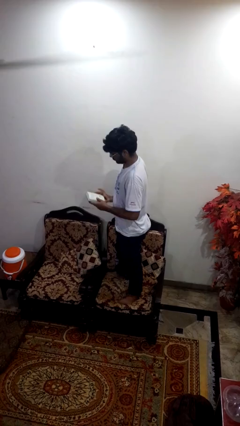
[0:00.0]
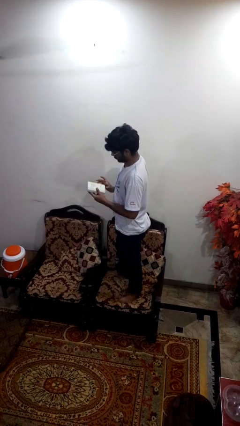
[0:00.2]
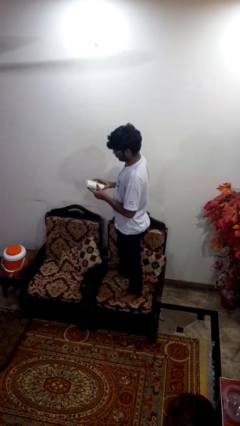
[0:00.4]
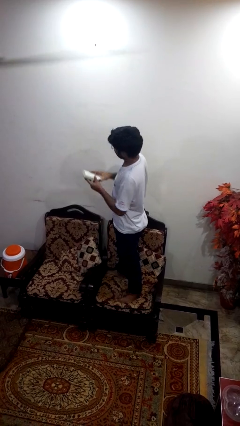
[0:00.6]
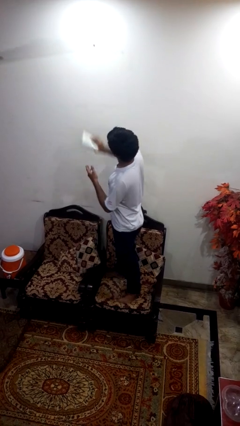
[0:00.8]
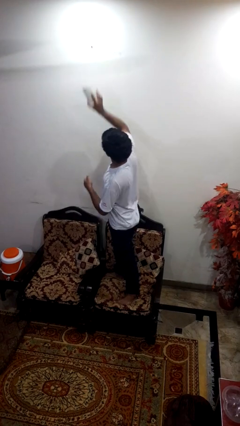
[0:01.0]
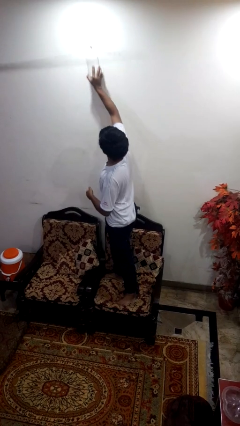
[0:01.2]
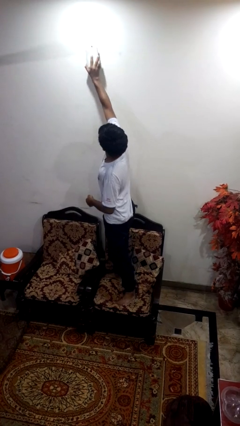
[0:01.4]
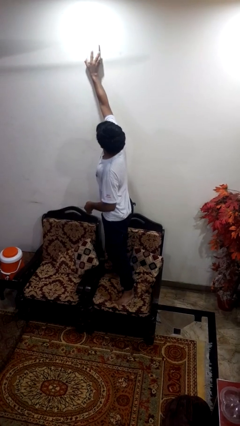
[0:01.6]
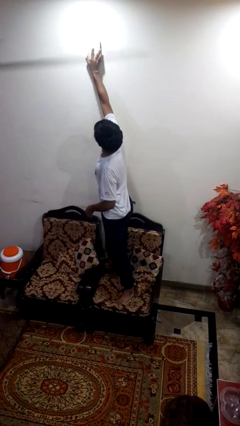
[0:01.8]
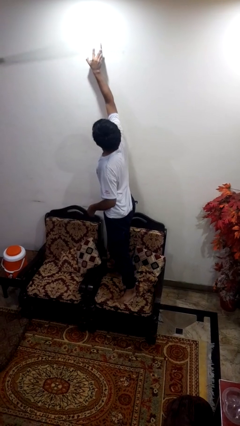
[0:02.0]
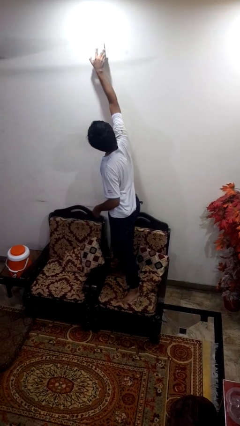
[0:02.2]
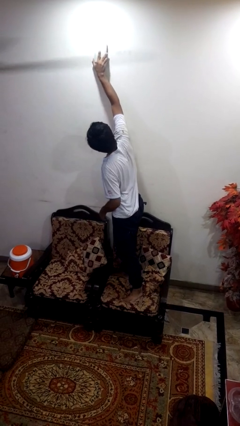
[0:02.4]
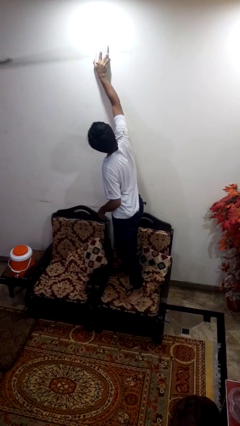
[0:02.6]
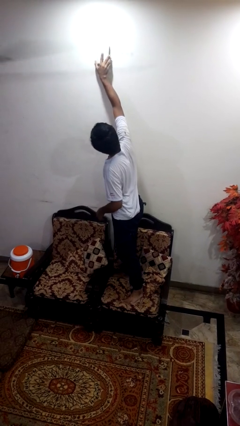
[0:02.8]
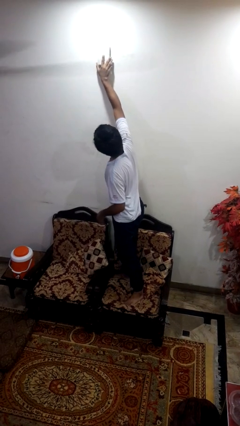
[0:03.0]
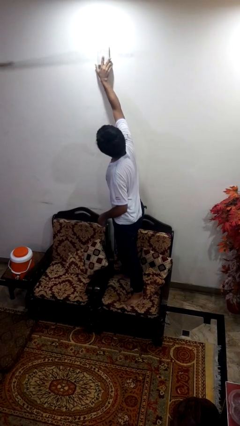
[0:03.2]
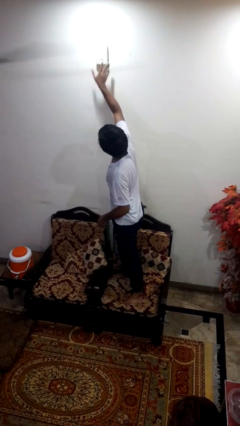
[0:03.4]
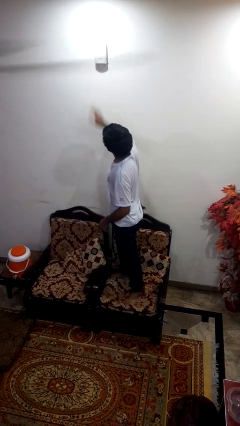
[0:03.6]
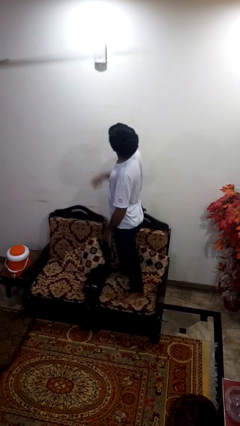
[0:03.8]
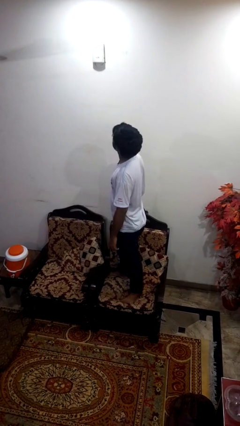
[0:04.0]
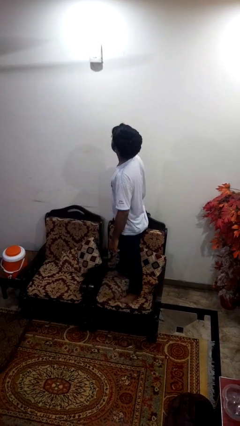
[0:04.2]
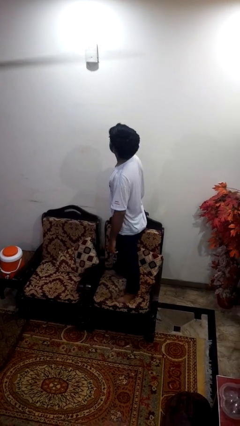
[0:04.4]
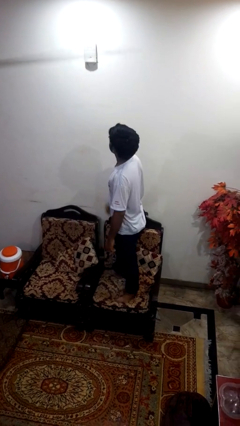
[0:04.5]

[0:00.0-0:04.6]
person puts up smoke detector

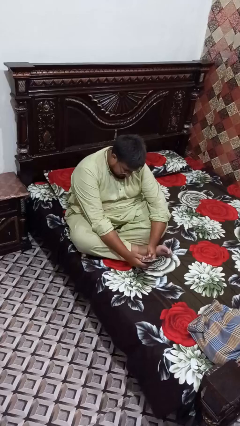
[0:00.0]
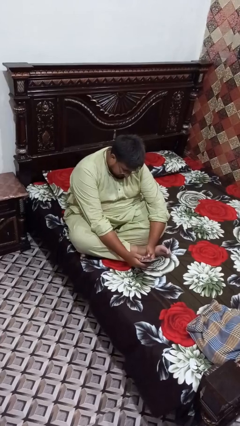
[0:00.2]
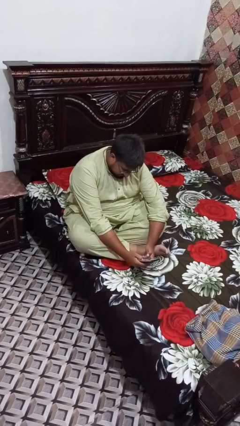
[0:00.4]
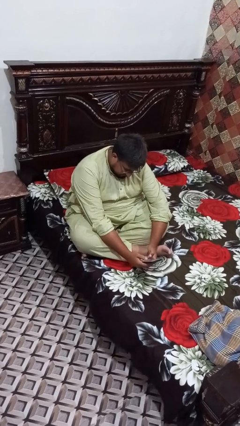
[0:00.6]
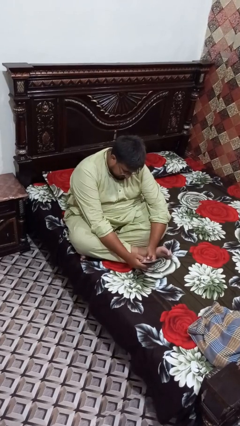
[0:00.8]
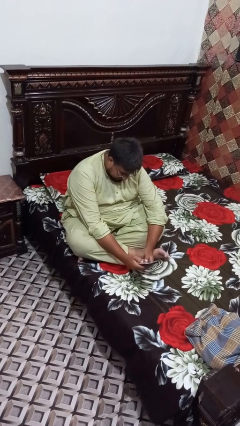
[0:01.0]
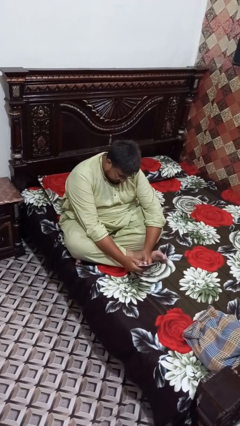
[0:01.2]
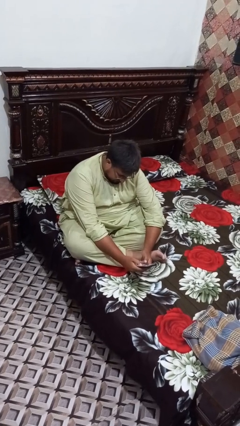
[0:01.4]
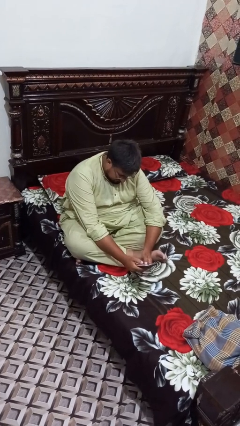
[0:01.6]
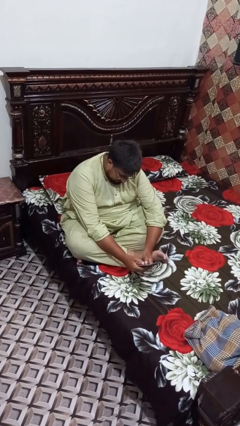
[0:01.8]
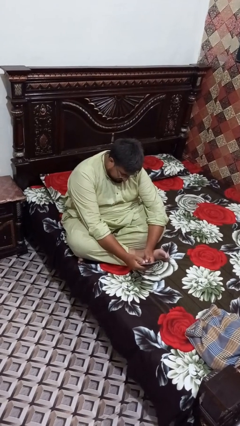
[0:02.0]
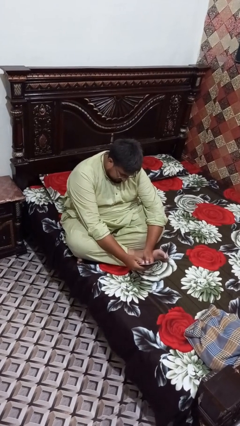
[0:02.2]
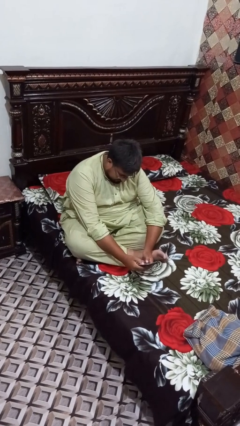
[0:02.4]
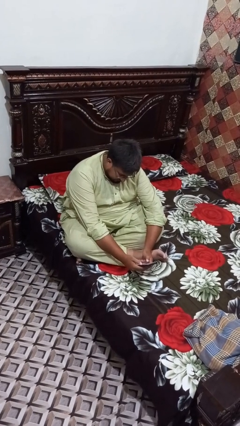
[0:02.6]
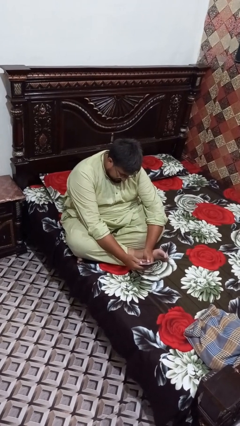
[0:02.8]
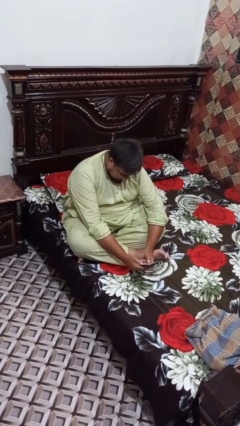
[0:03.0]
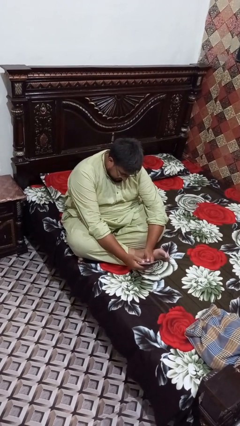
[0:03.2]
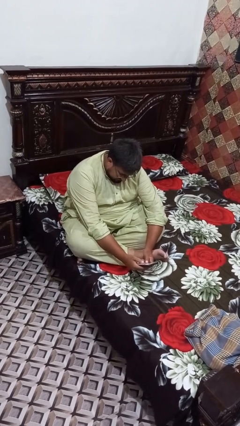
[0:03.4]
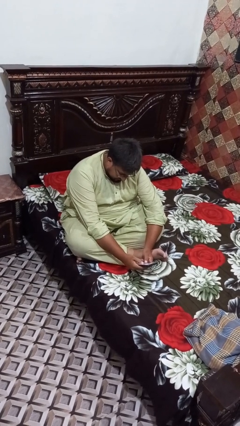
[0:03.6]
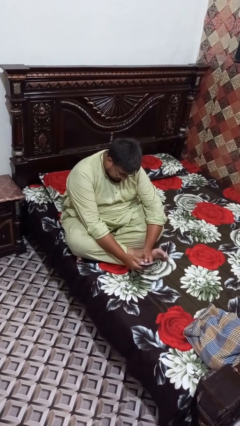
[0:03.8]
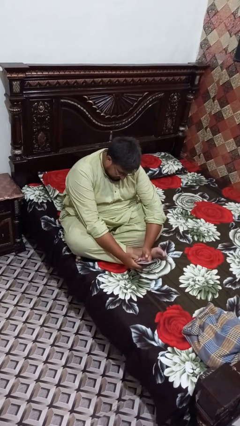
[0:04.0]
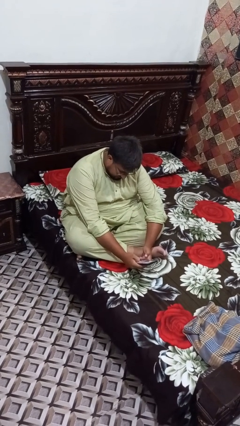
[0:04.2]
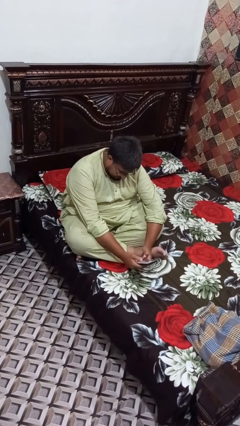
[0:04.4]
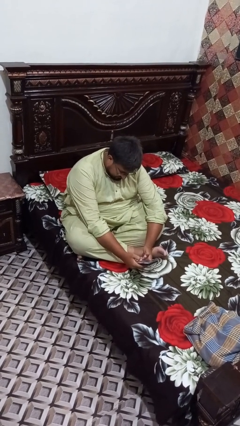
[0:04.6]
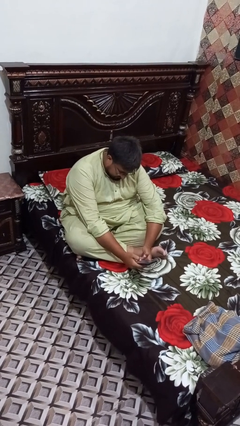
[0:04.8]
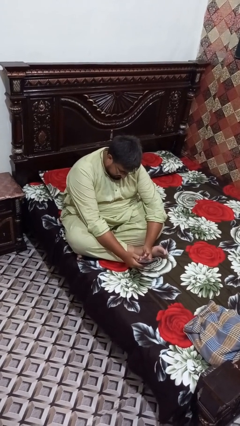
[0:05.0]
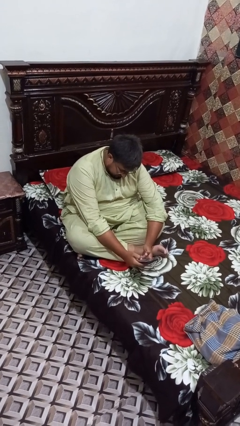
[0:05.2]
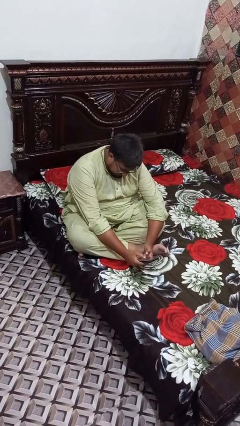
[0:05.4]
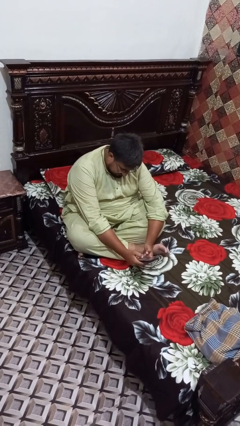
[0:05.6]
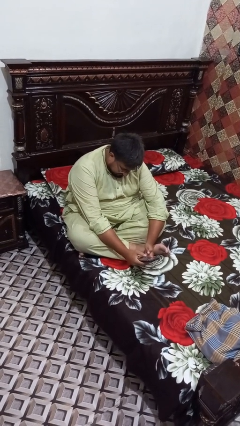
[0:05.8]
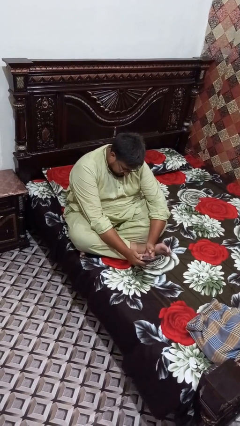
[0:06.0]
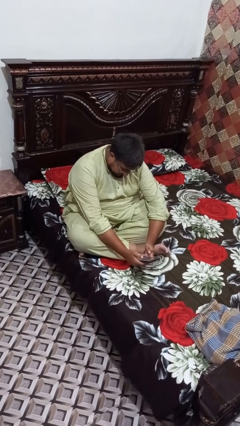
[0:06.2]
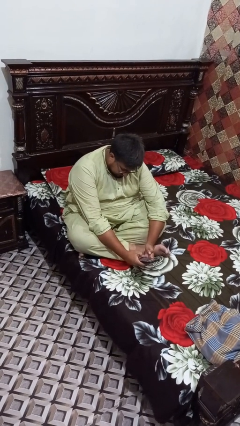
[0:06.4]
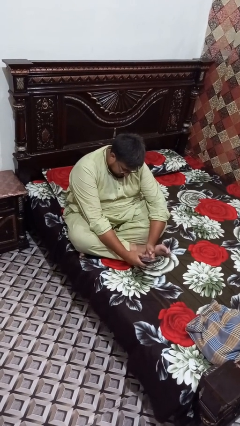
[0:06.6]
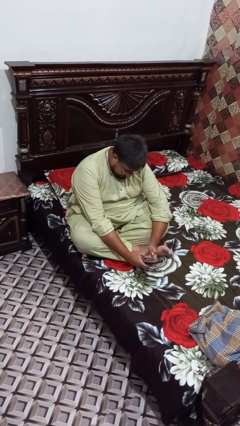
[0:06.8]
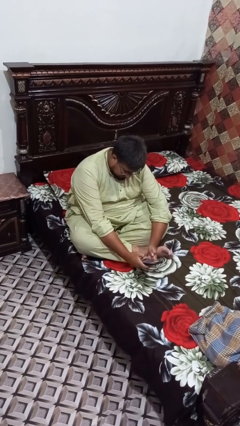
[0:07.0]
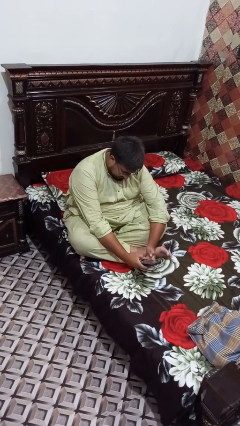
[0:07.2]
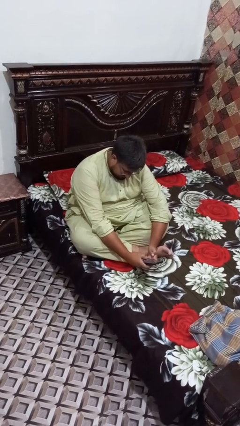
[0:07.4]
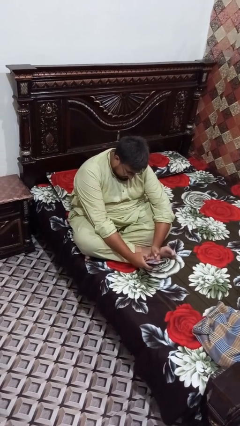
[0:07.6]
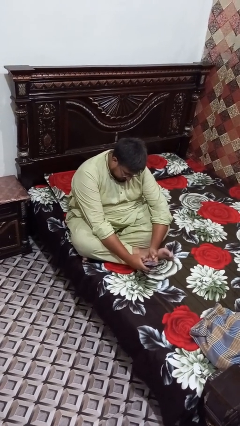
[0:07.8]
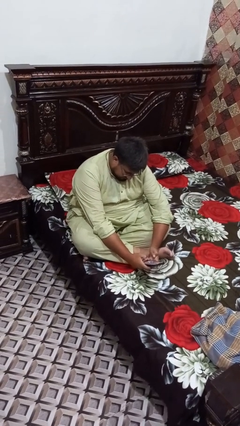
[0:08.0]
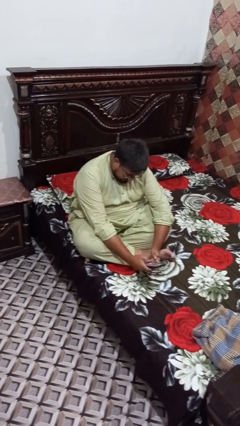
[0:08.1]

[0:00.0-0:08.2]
person interacts with tablet

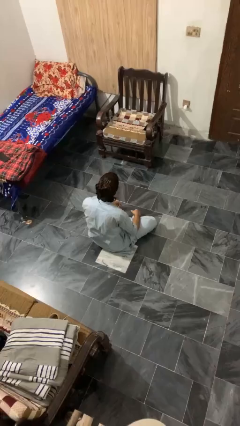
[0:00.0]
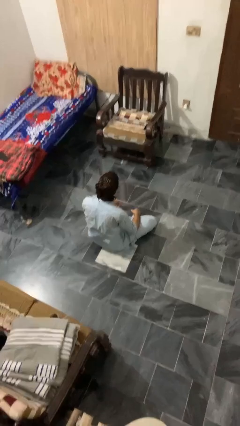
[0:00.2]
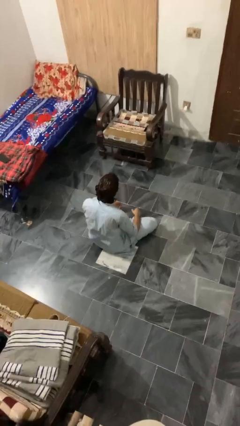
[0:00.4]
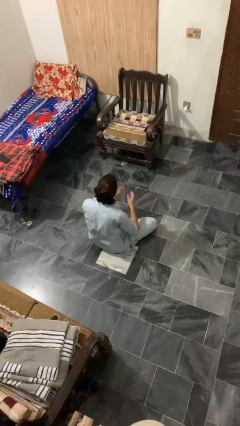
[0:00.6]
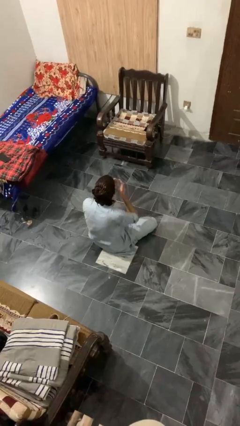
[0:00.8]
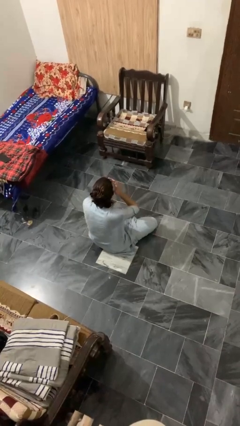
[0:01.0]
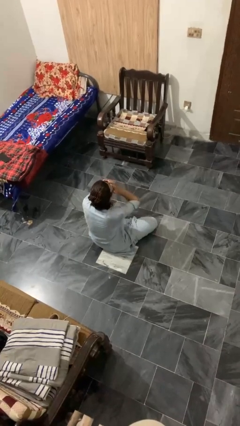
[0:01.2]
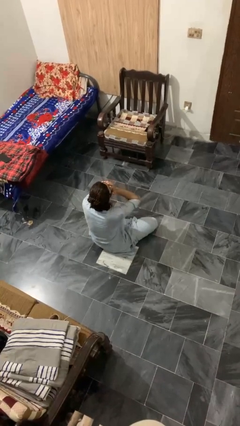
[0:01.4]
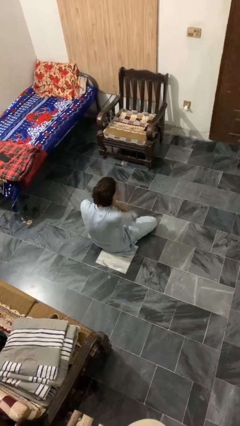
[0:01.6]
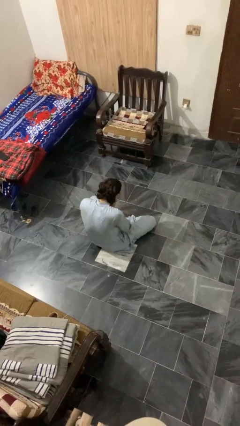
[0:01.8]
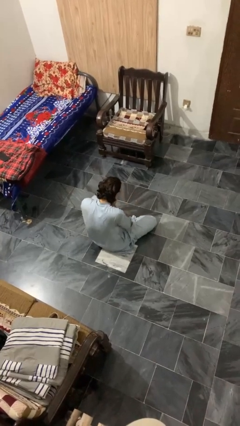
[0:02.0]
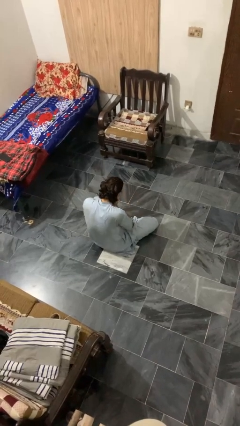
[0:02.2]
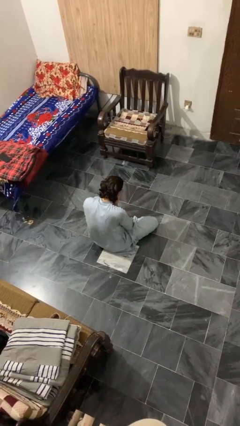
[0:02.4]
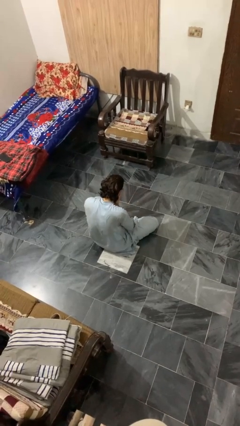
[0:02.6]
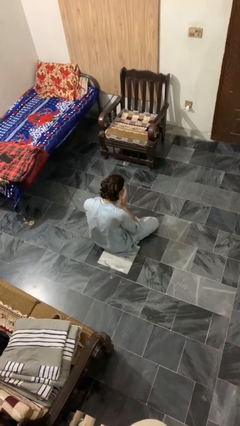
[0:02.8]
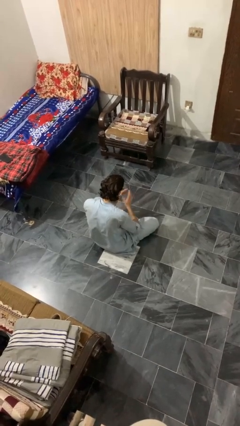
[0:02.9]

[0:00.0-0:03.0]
person sneezes into hand

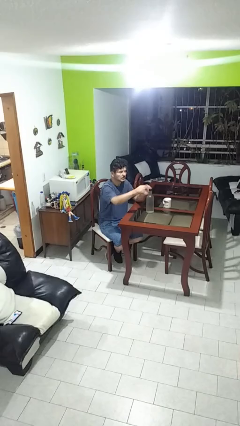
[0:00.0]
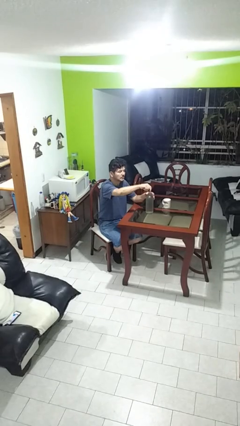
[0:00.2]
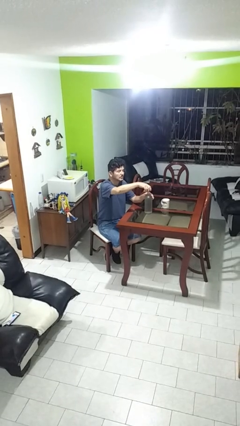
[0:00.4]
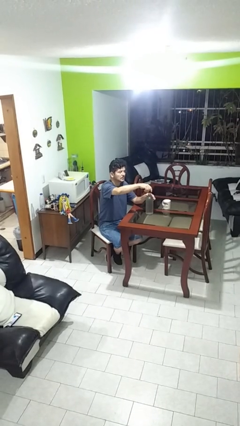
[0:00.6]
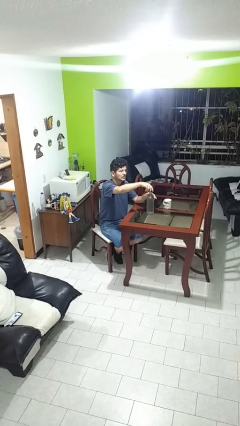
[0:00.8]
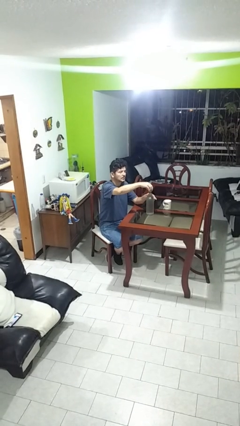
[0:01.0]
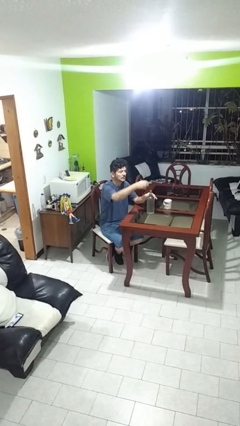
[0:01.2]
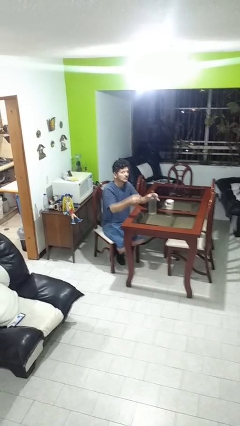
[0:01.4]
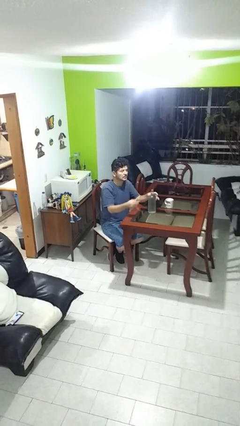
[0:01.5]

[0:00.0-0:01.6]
person unscrews lid from bottle
